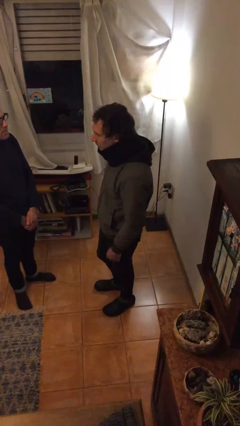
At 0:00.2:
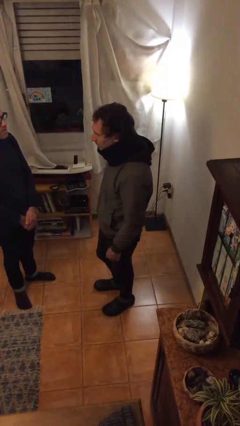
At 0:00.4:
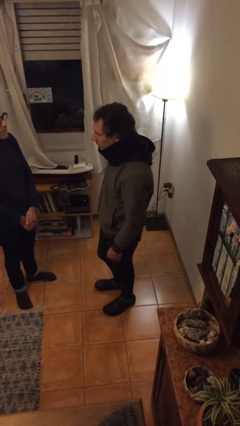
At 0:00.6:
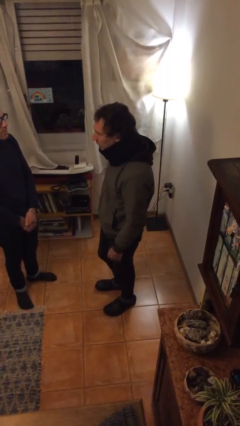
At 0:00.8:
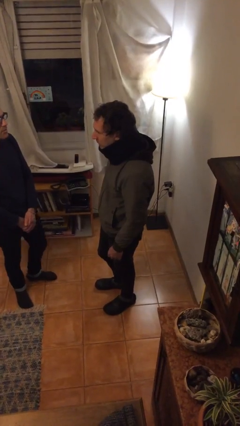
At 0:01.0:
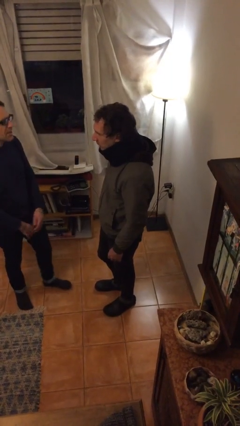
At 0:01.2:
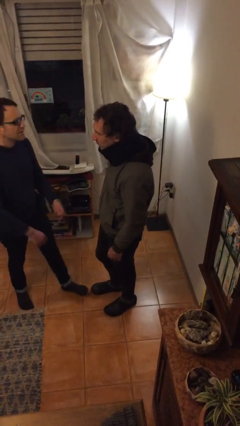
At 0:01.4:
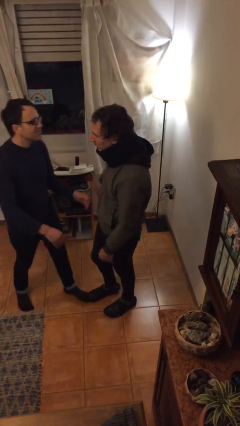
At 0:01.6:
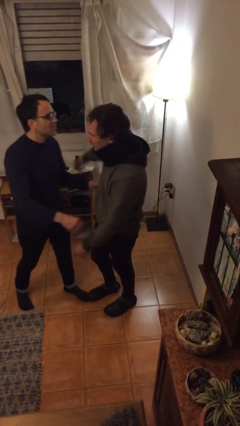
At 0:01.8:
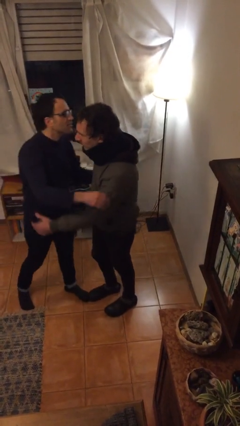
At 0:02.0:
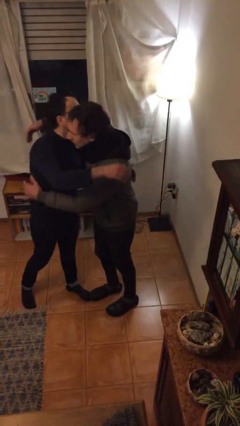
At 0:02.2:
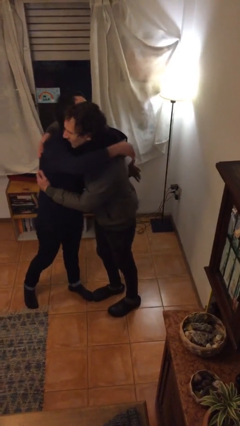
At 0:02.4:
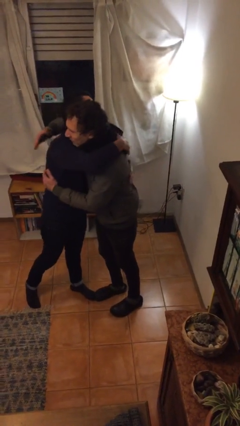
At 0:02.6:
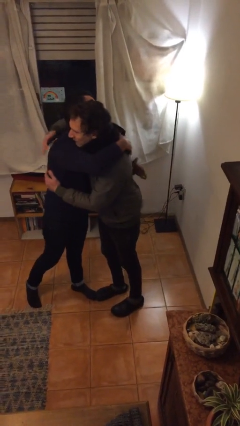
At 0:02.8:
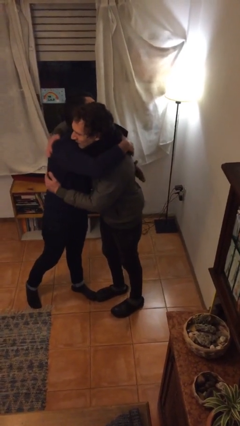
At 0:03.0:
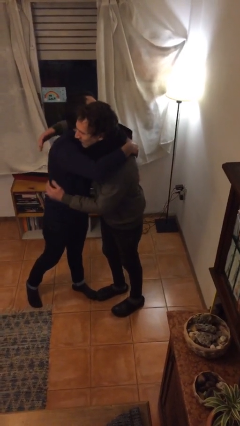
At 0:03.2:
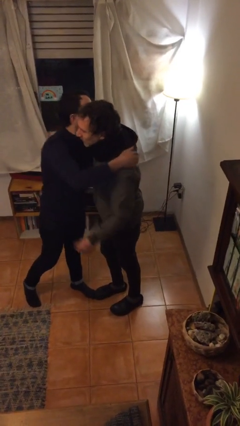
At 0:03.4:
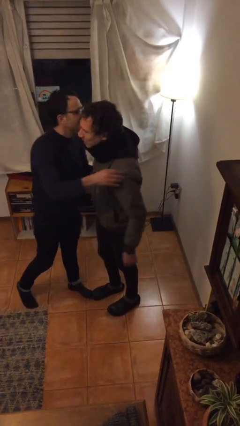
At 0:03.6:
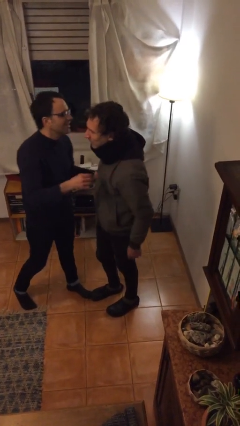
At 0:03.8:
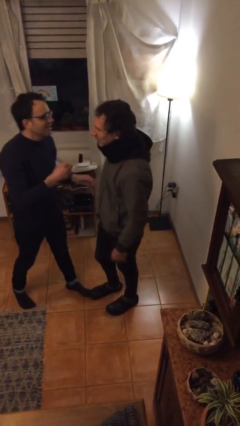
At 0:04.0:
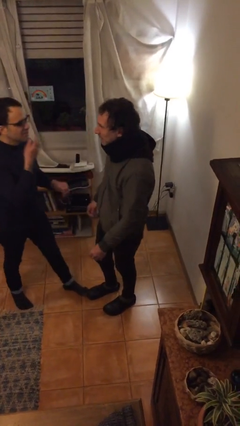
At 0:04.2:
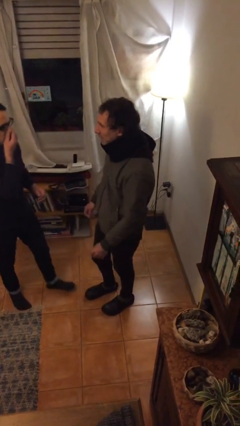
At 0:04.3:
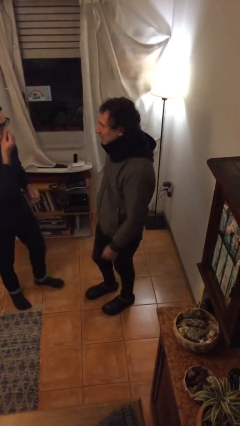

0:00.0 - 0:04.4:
person embraces person

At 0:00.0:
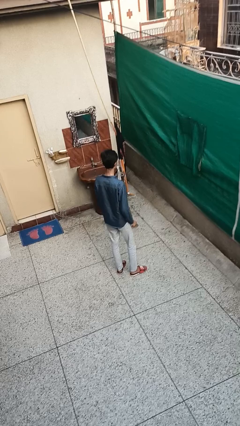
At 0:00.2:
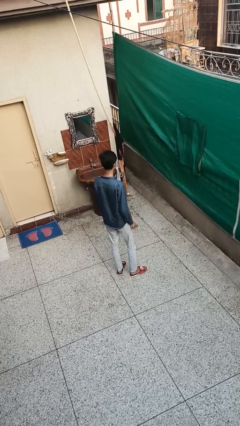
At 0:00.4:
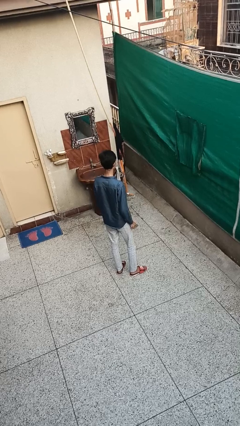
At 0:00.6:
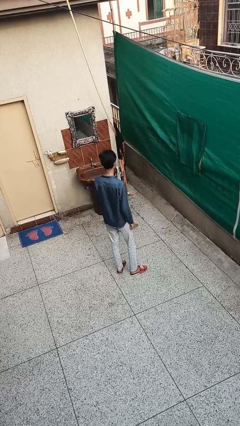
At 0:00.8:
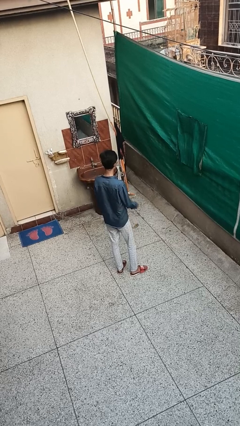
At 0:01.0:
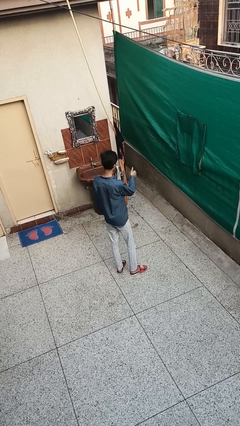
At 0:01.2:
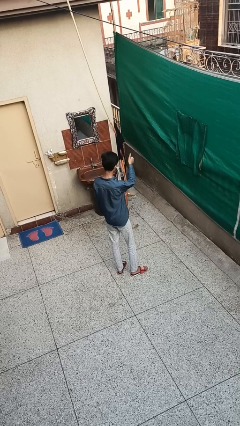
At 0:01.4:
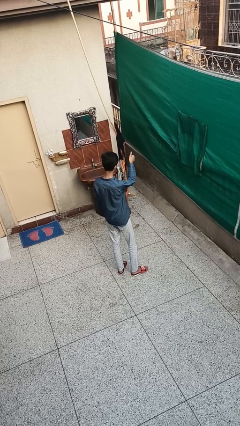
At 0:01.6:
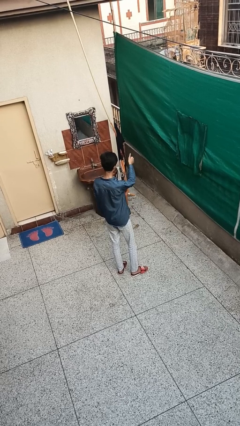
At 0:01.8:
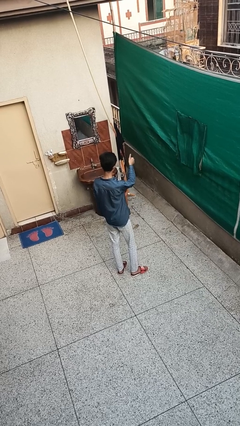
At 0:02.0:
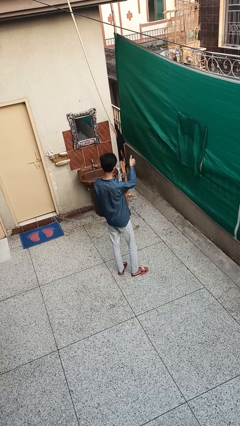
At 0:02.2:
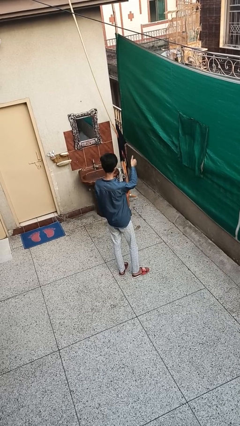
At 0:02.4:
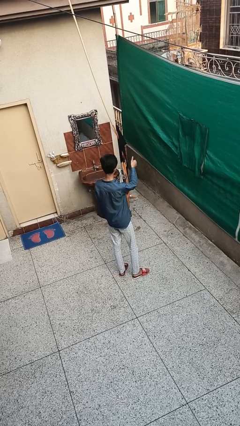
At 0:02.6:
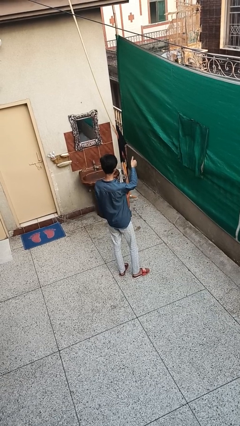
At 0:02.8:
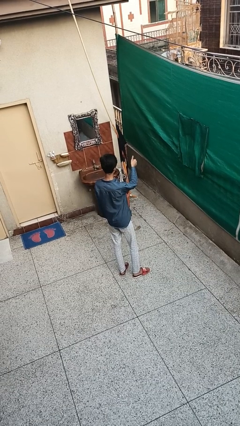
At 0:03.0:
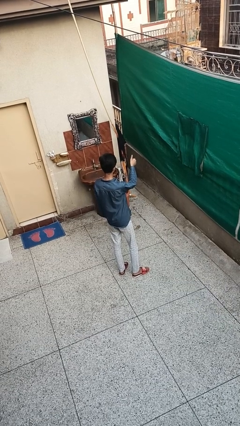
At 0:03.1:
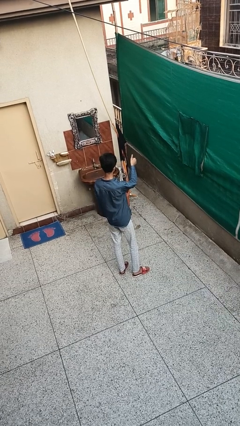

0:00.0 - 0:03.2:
person gestures thumbs up

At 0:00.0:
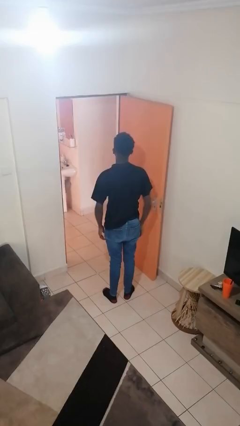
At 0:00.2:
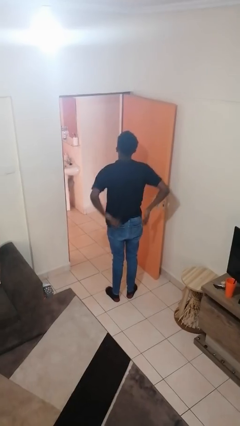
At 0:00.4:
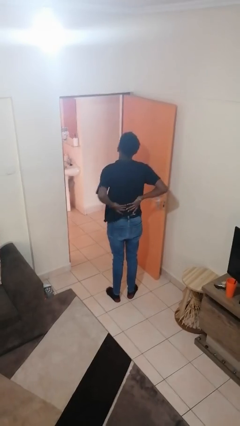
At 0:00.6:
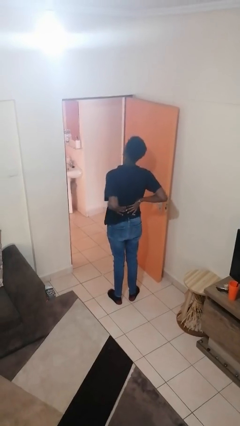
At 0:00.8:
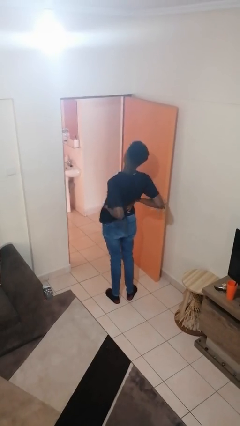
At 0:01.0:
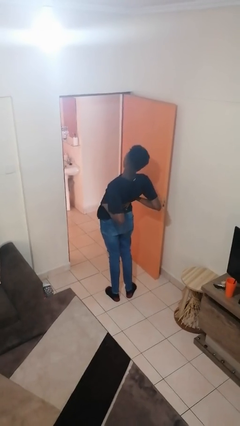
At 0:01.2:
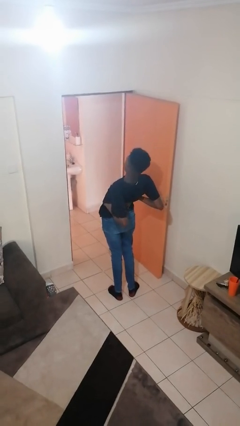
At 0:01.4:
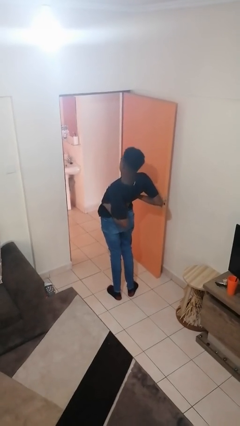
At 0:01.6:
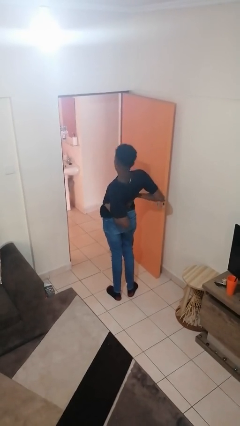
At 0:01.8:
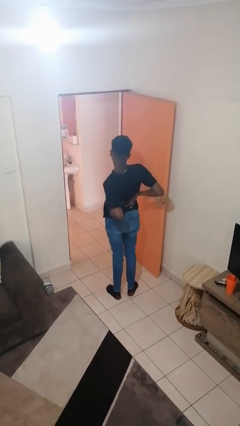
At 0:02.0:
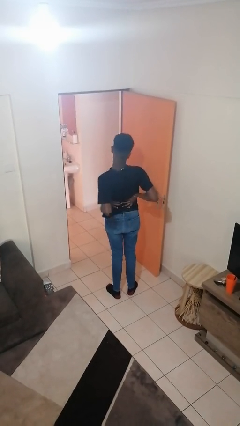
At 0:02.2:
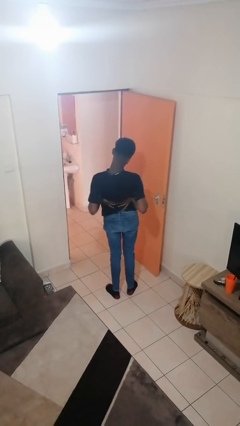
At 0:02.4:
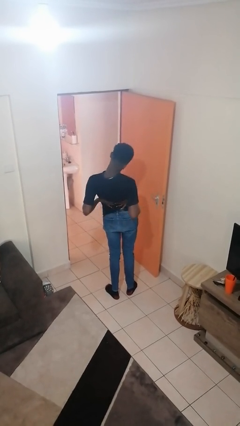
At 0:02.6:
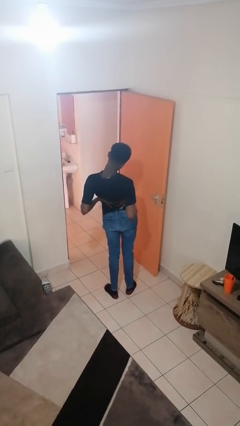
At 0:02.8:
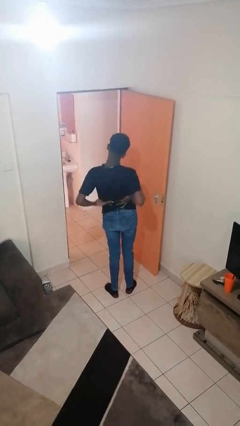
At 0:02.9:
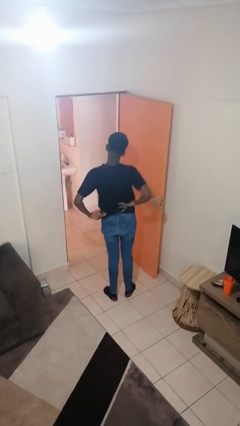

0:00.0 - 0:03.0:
person stretches back

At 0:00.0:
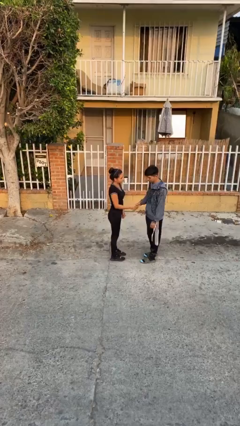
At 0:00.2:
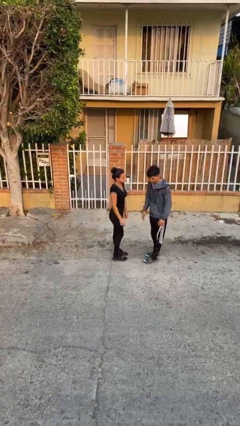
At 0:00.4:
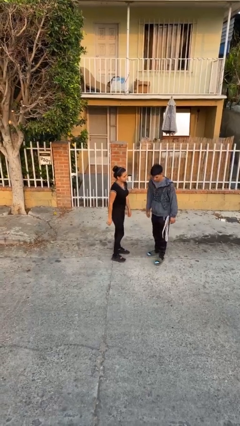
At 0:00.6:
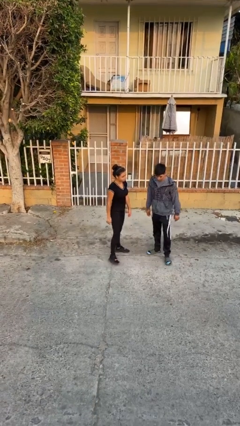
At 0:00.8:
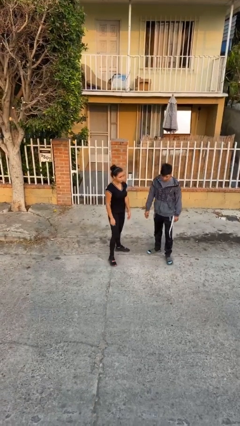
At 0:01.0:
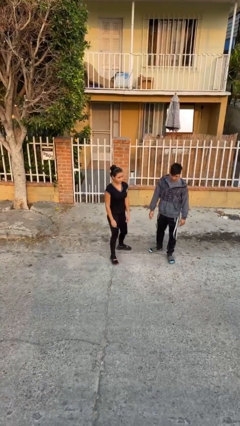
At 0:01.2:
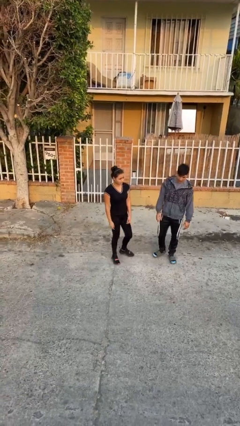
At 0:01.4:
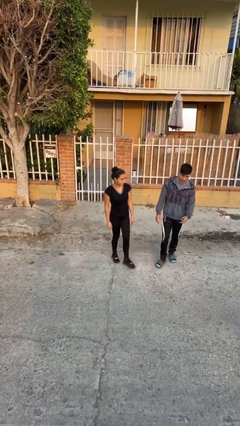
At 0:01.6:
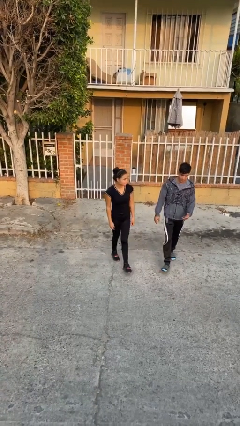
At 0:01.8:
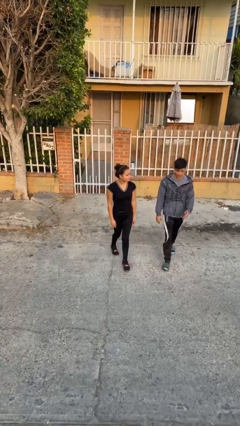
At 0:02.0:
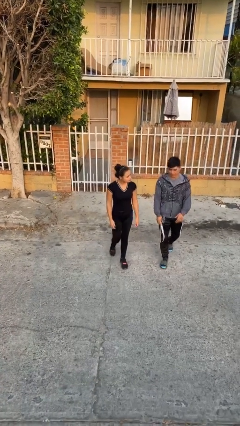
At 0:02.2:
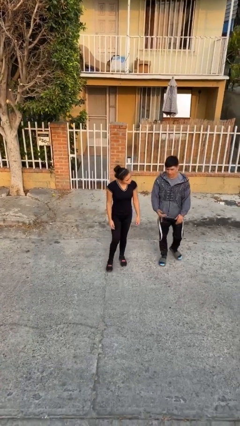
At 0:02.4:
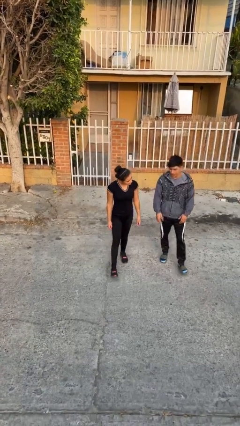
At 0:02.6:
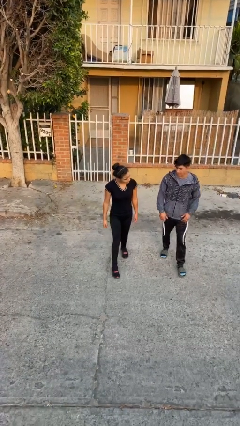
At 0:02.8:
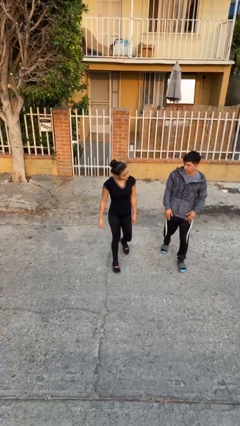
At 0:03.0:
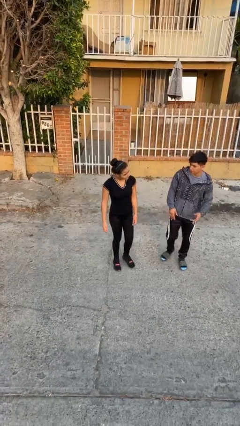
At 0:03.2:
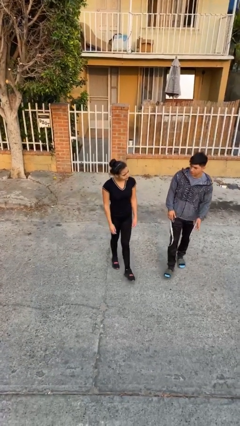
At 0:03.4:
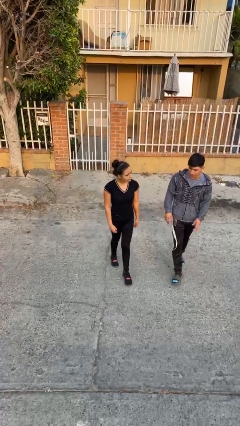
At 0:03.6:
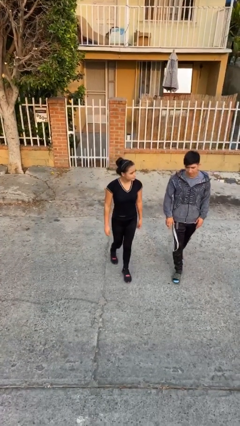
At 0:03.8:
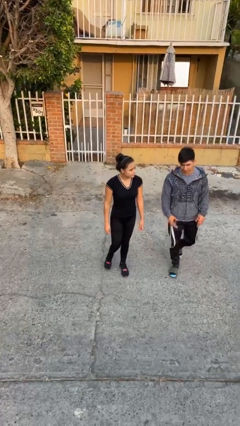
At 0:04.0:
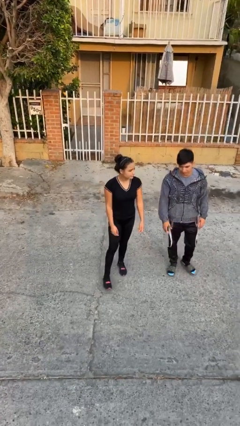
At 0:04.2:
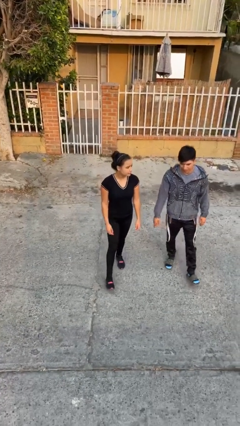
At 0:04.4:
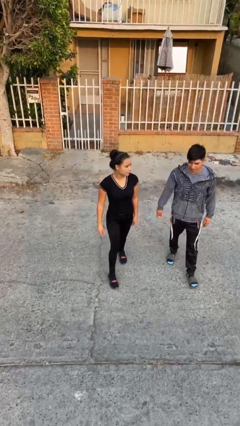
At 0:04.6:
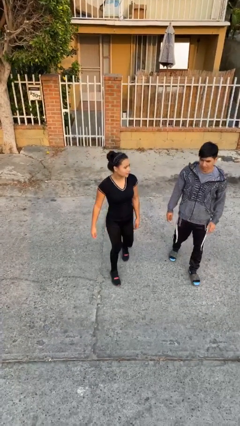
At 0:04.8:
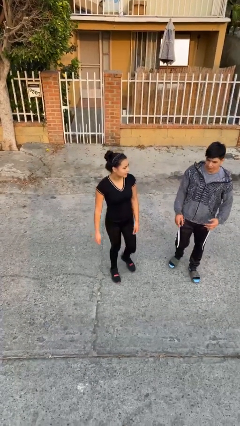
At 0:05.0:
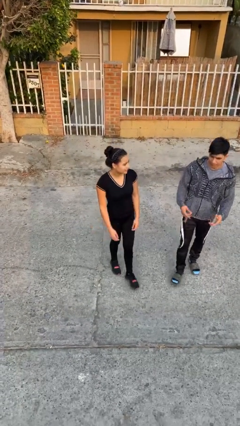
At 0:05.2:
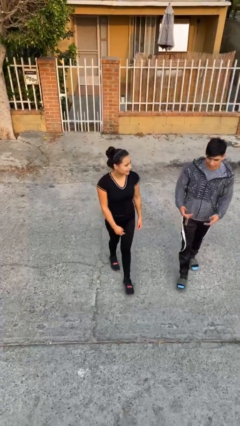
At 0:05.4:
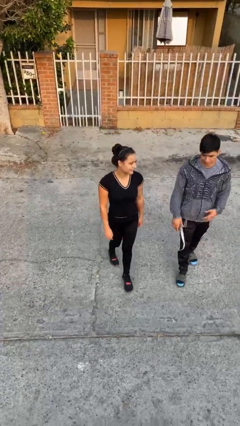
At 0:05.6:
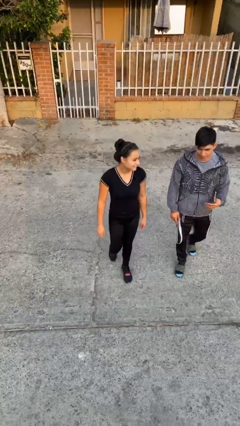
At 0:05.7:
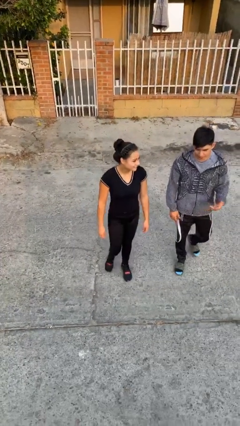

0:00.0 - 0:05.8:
person talks to person

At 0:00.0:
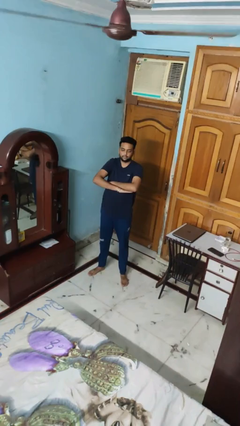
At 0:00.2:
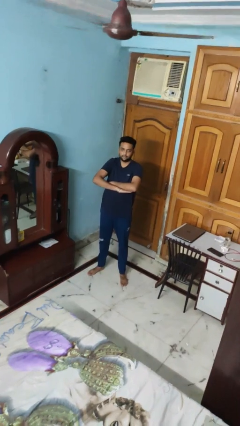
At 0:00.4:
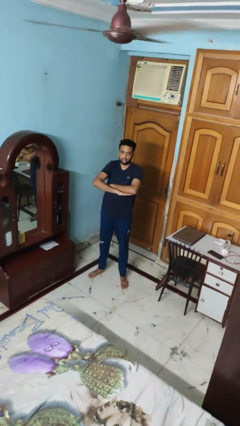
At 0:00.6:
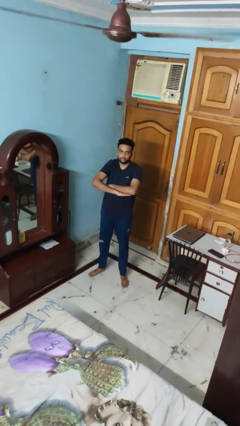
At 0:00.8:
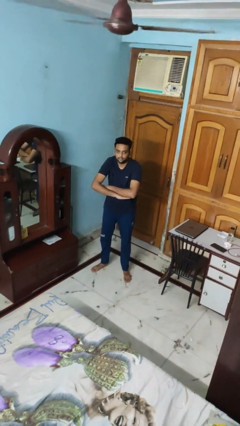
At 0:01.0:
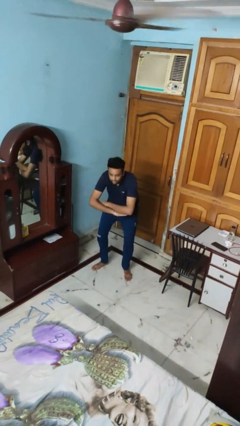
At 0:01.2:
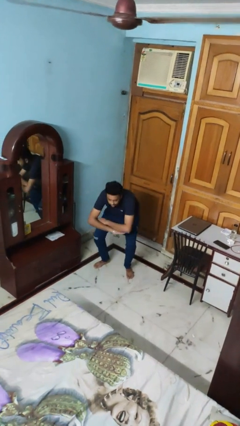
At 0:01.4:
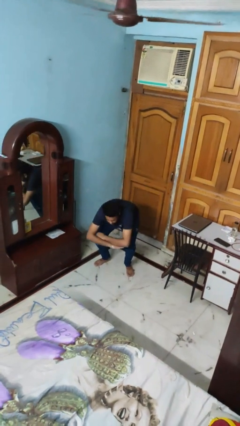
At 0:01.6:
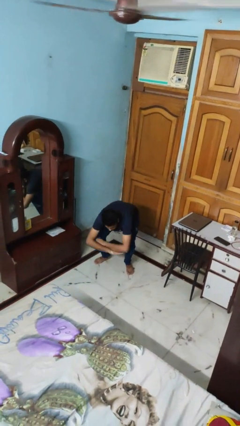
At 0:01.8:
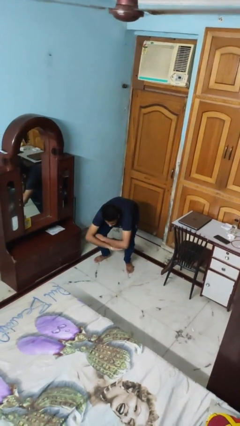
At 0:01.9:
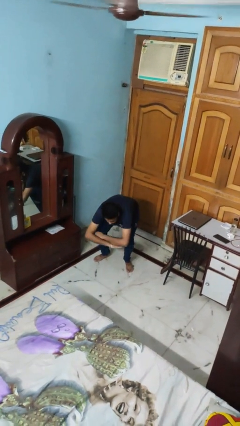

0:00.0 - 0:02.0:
person squats
